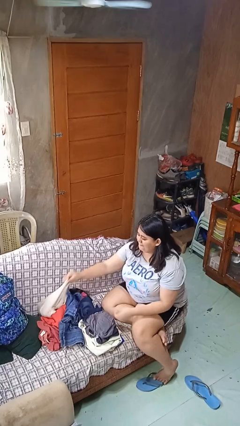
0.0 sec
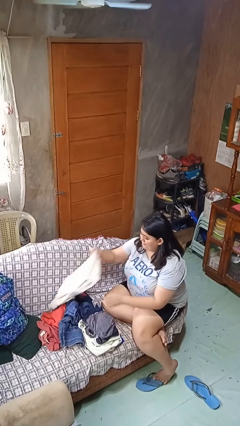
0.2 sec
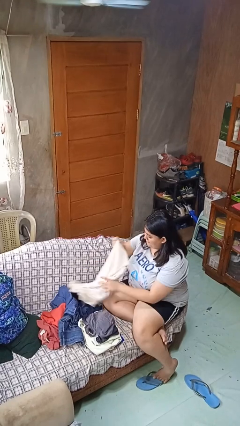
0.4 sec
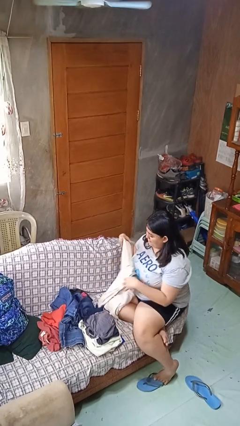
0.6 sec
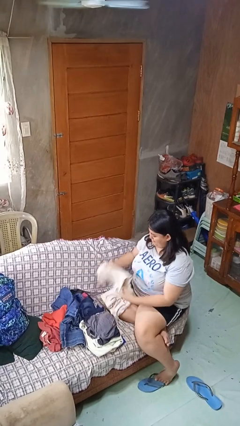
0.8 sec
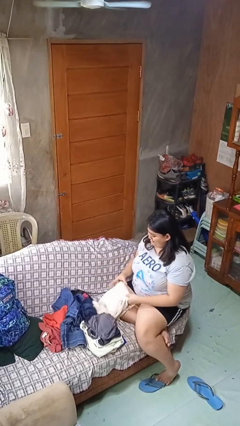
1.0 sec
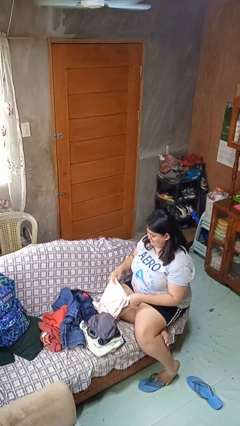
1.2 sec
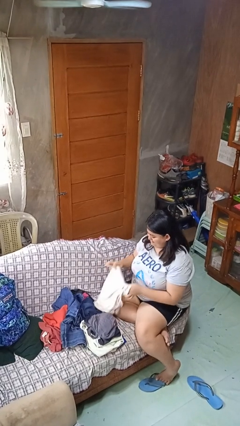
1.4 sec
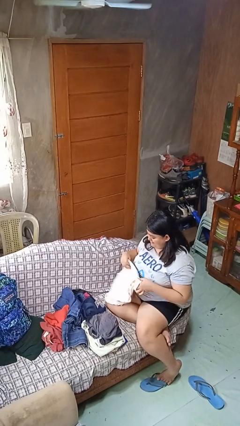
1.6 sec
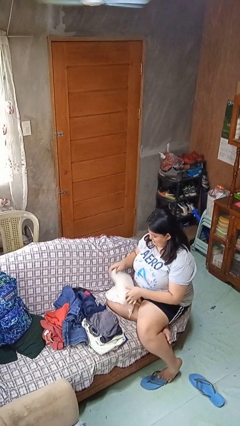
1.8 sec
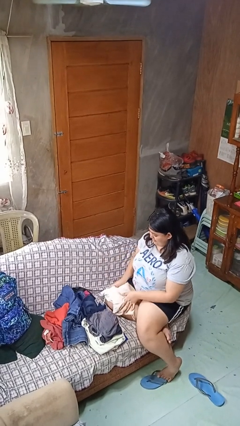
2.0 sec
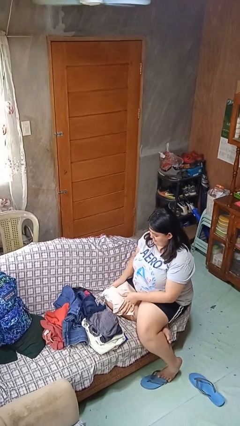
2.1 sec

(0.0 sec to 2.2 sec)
person folds shirt

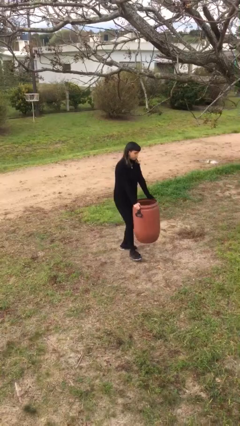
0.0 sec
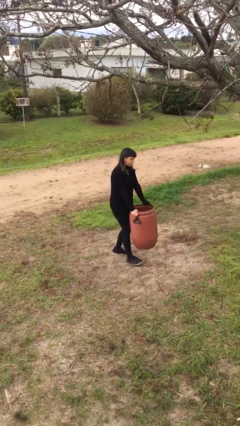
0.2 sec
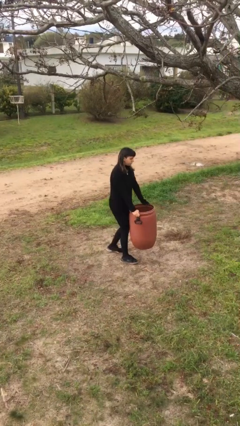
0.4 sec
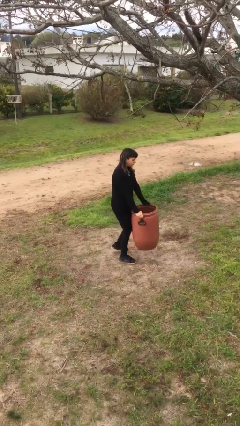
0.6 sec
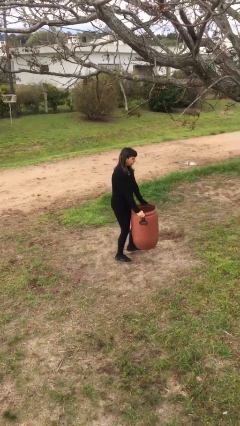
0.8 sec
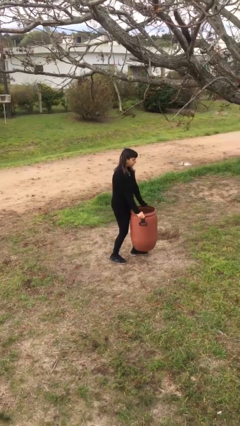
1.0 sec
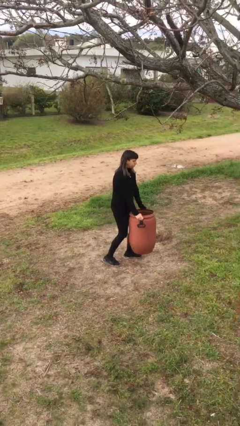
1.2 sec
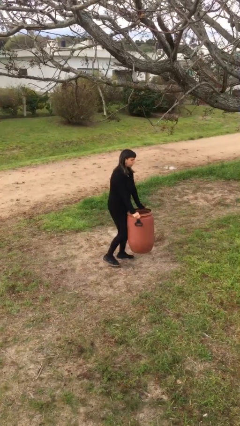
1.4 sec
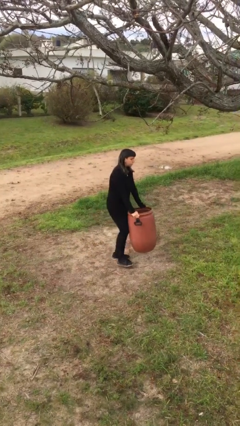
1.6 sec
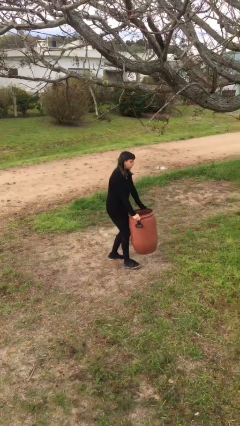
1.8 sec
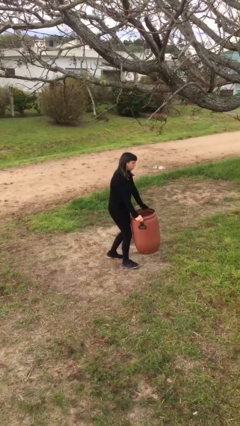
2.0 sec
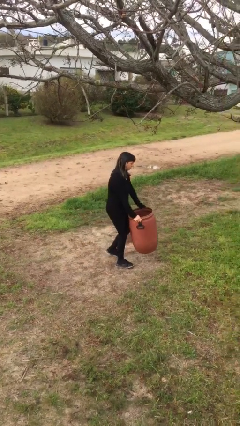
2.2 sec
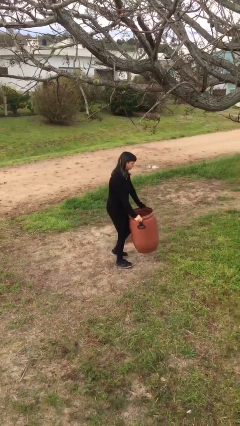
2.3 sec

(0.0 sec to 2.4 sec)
person carries heavy object

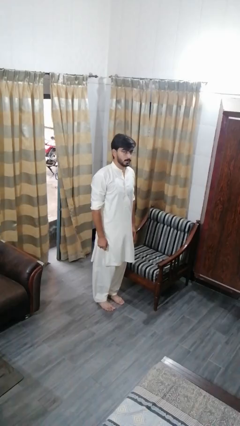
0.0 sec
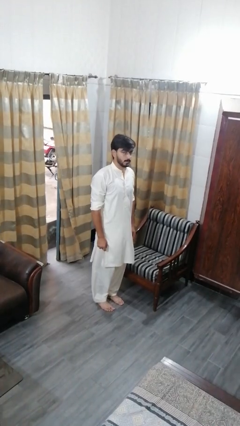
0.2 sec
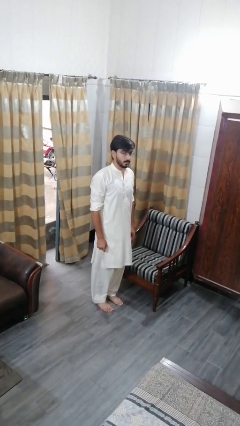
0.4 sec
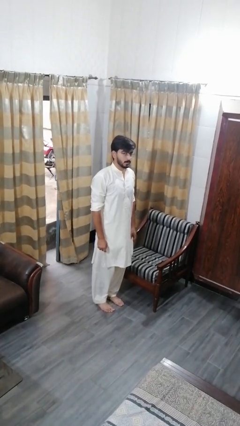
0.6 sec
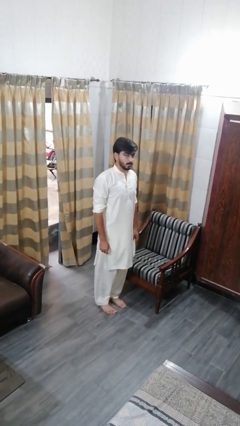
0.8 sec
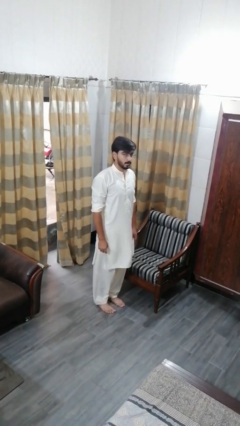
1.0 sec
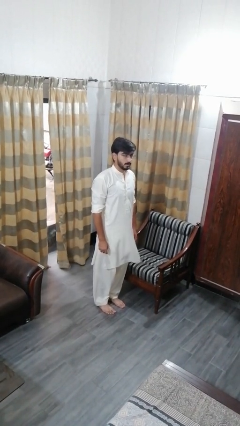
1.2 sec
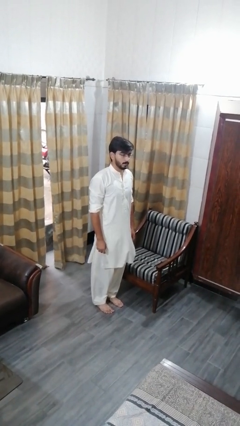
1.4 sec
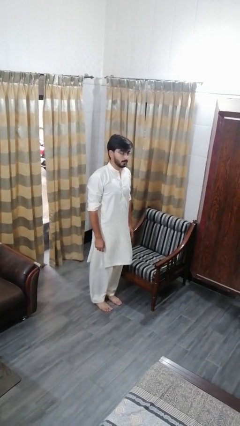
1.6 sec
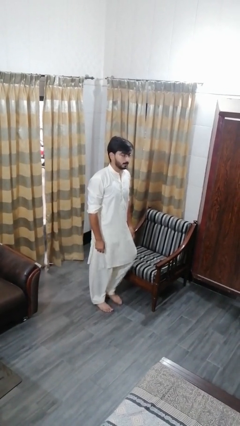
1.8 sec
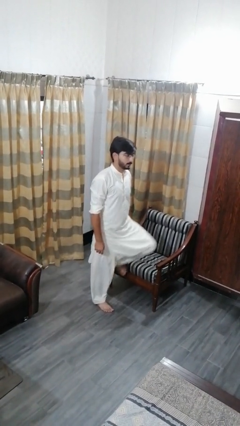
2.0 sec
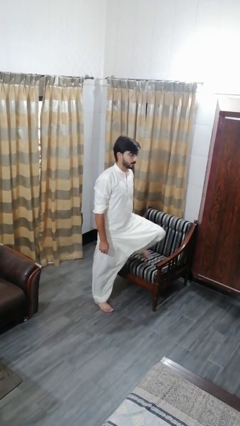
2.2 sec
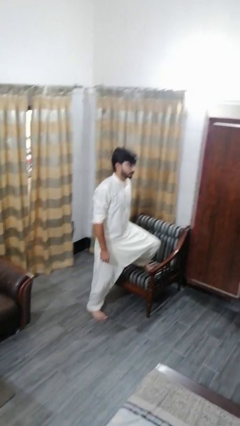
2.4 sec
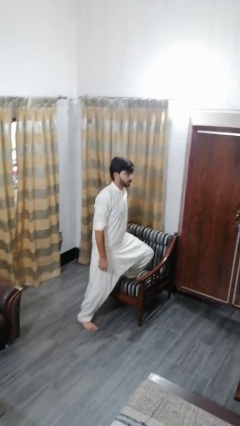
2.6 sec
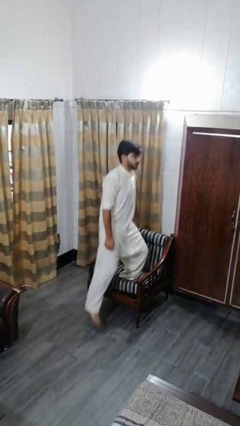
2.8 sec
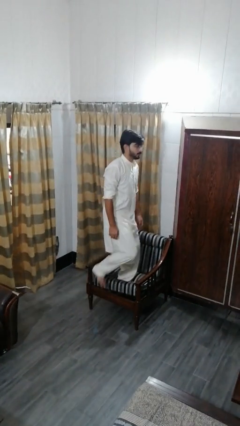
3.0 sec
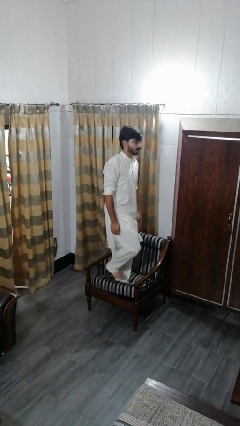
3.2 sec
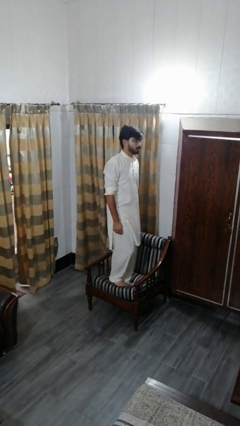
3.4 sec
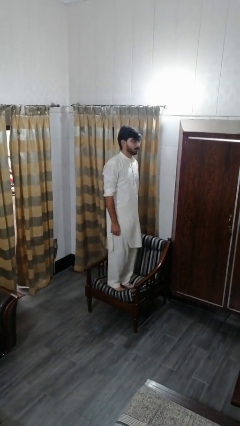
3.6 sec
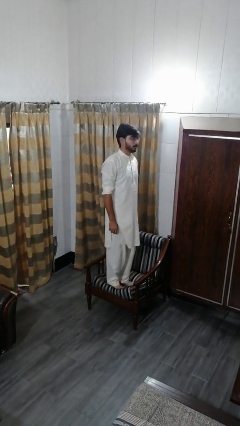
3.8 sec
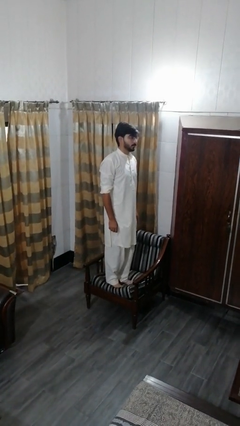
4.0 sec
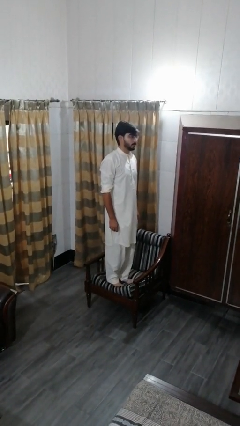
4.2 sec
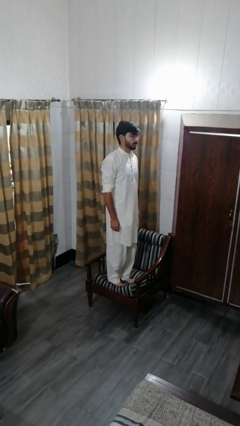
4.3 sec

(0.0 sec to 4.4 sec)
person climbs on chair

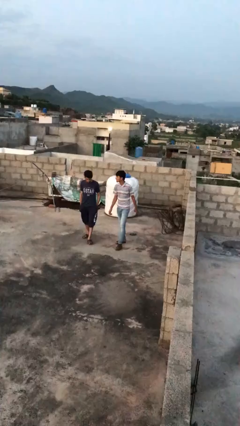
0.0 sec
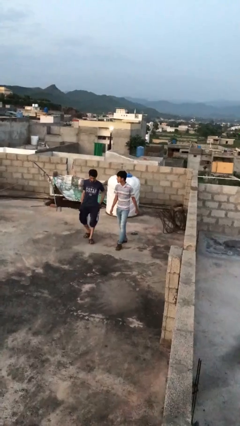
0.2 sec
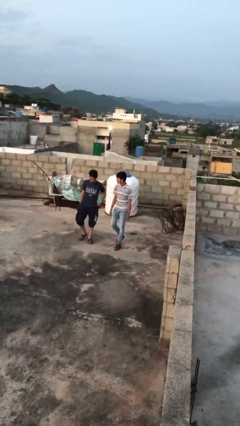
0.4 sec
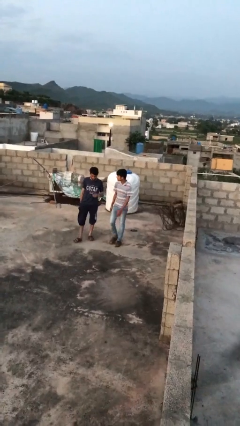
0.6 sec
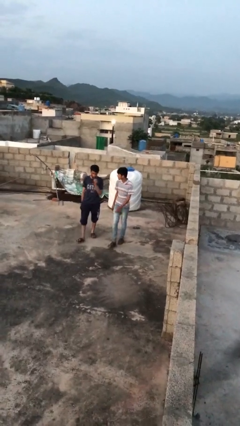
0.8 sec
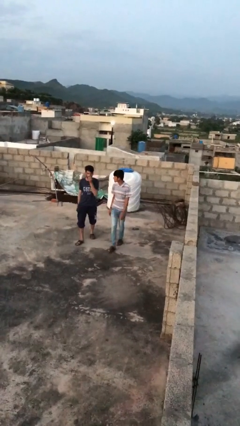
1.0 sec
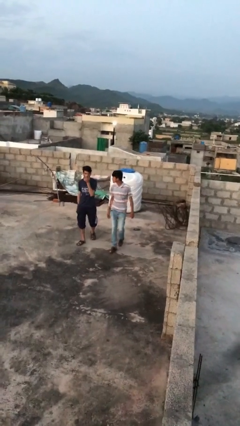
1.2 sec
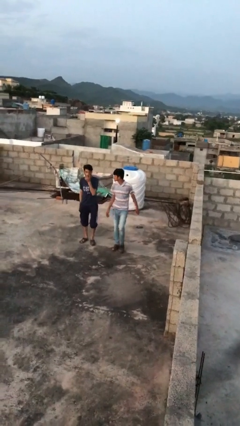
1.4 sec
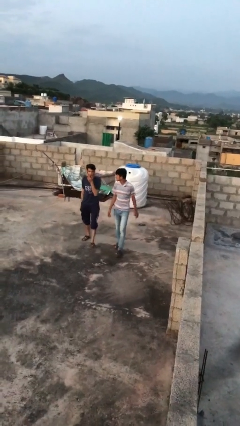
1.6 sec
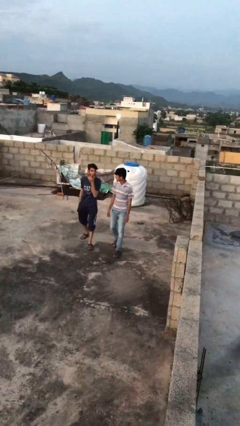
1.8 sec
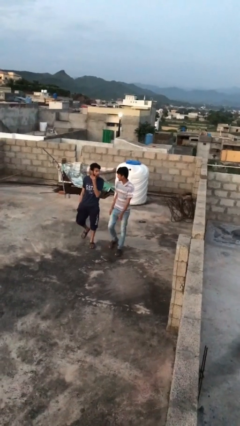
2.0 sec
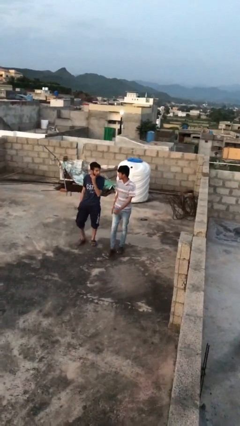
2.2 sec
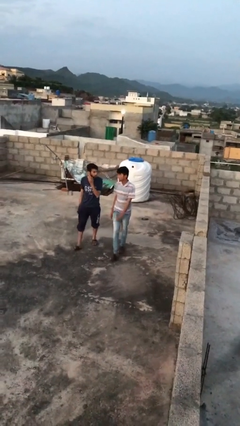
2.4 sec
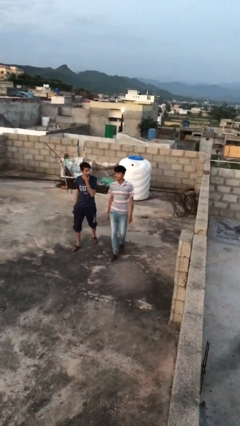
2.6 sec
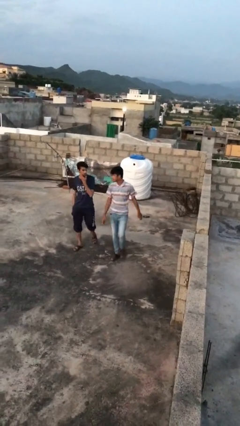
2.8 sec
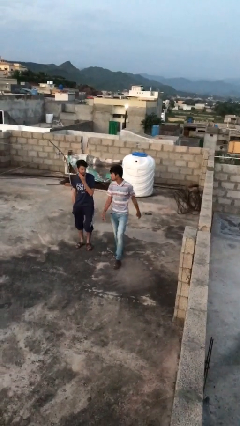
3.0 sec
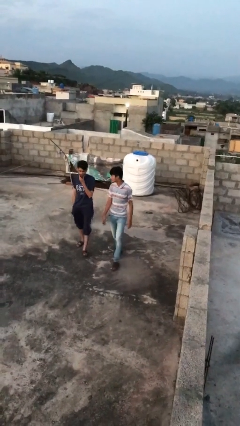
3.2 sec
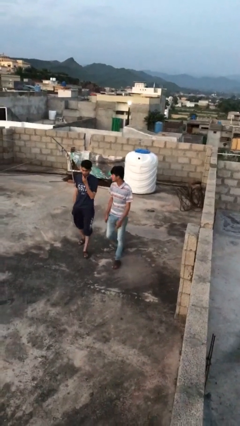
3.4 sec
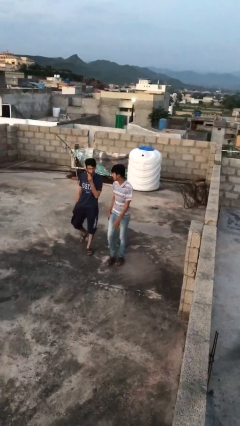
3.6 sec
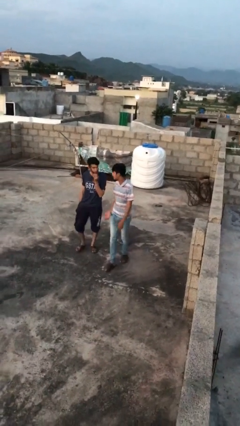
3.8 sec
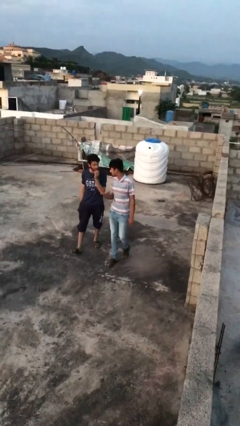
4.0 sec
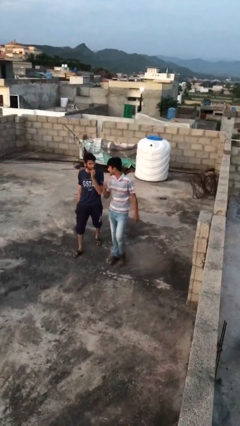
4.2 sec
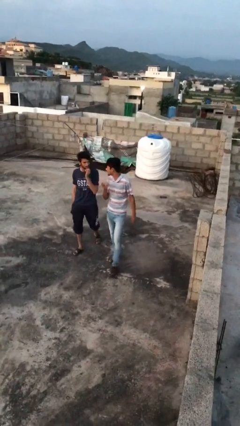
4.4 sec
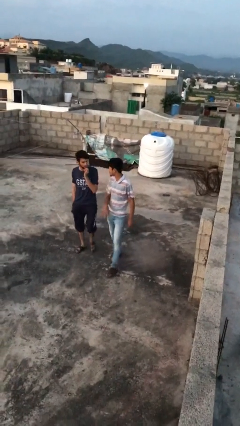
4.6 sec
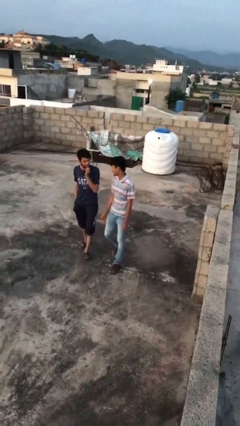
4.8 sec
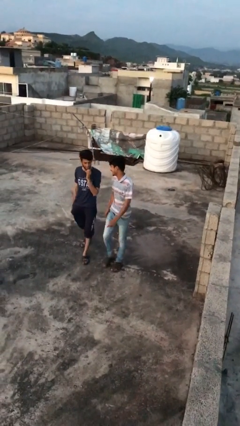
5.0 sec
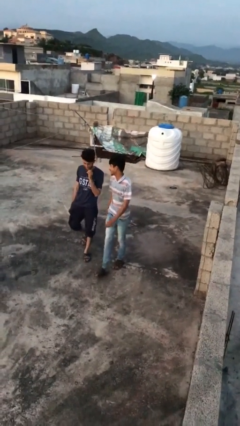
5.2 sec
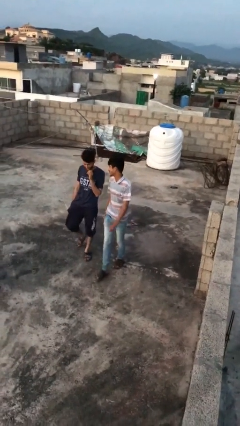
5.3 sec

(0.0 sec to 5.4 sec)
person talks to person

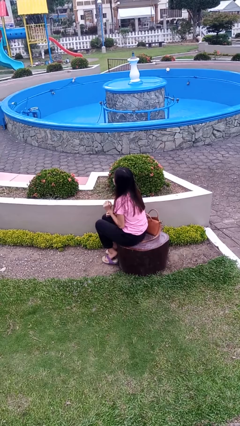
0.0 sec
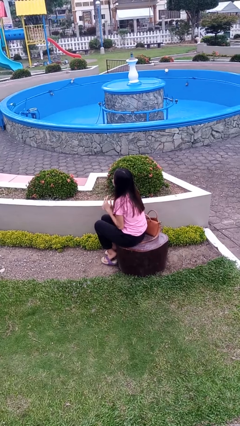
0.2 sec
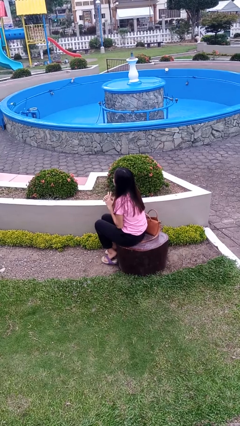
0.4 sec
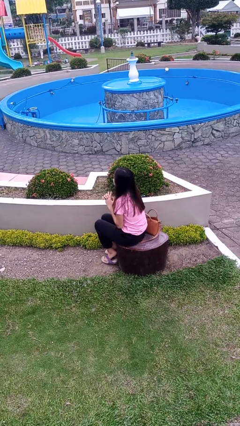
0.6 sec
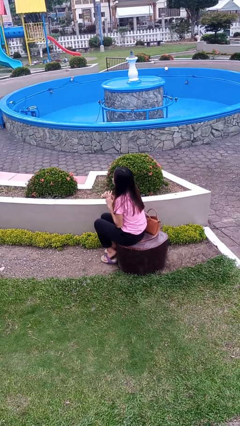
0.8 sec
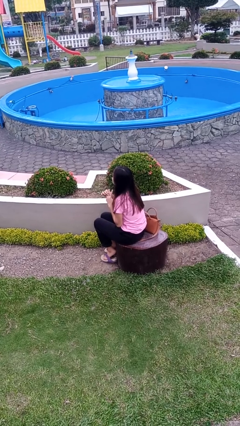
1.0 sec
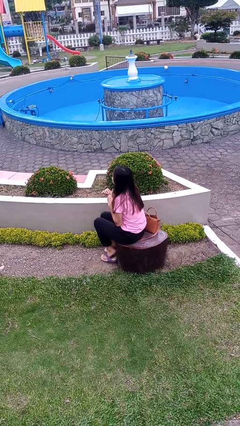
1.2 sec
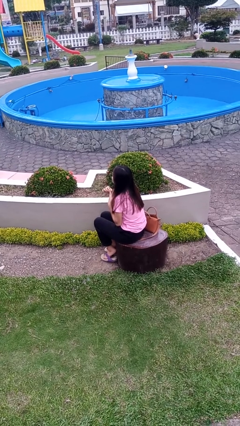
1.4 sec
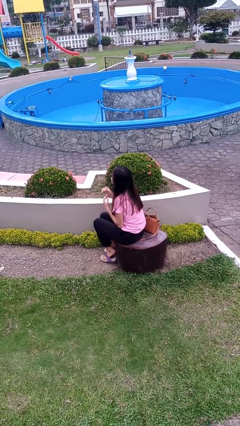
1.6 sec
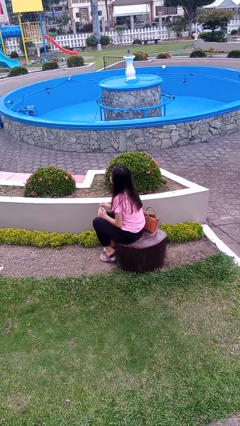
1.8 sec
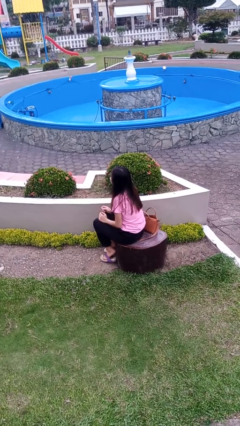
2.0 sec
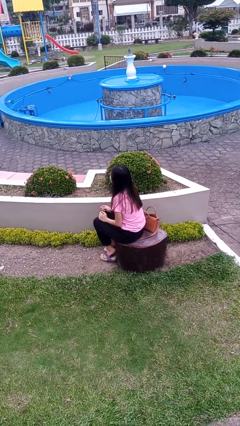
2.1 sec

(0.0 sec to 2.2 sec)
person takes off ring

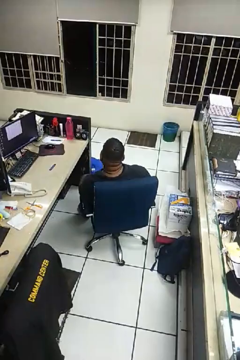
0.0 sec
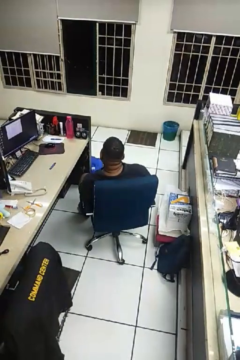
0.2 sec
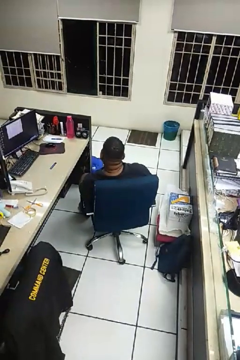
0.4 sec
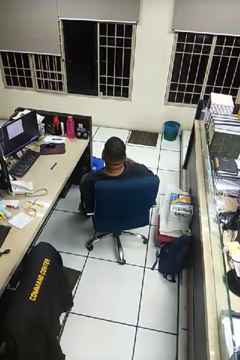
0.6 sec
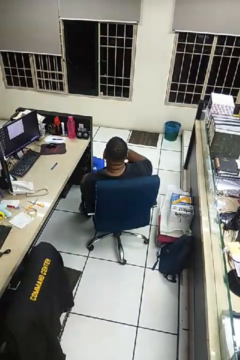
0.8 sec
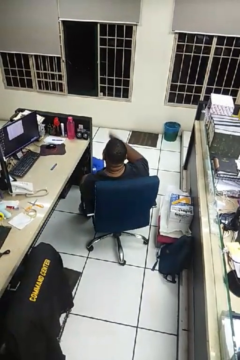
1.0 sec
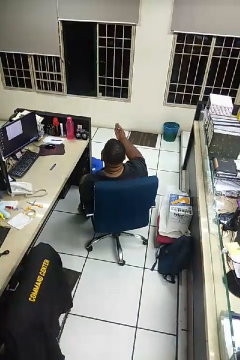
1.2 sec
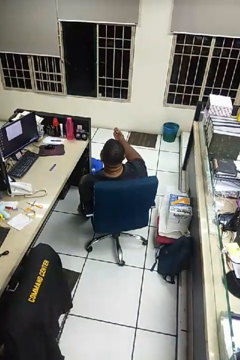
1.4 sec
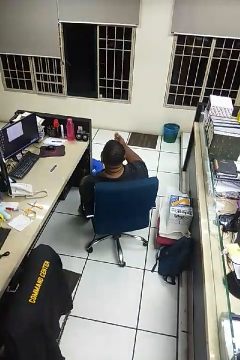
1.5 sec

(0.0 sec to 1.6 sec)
person gestures blow kiss
